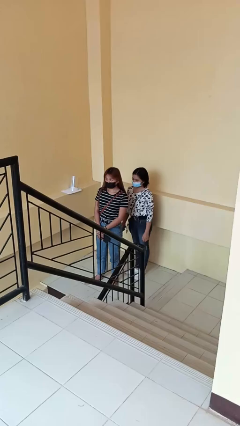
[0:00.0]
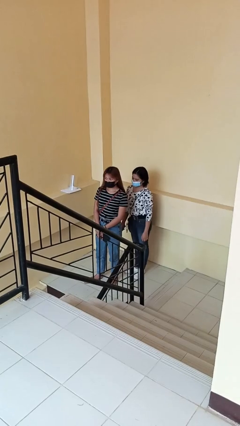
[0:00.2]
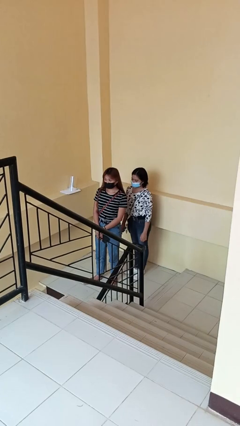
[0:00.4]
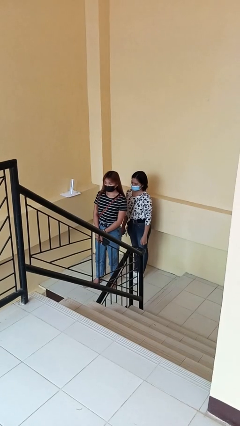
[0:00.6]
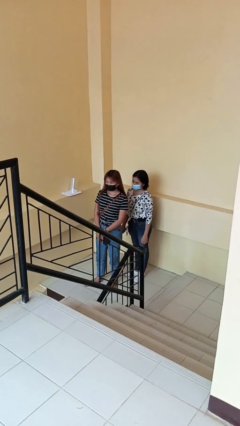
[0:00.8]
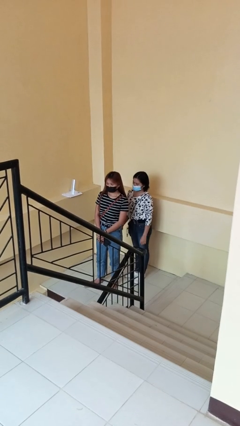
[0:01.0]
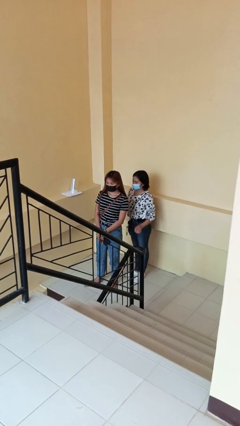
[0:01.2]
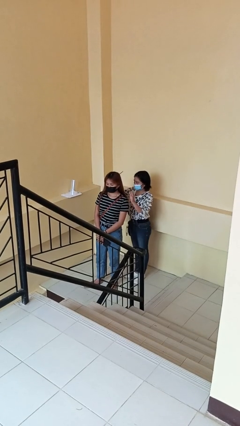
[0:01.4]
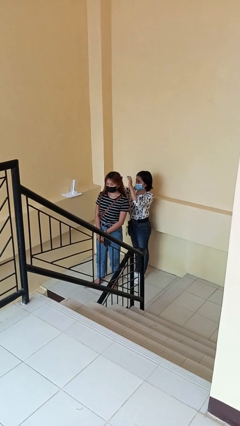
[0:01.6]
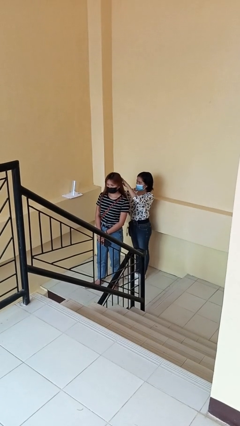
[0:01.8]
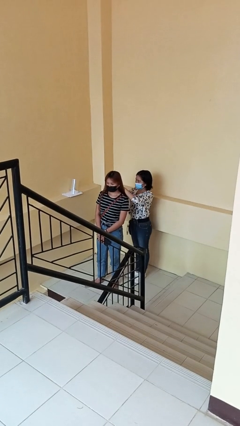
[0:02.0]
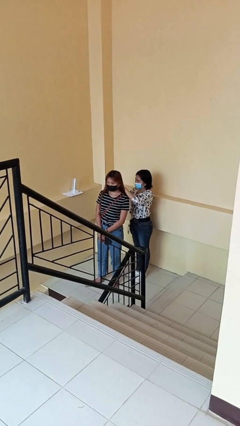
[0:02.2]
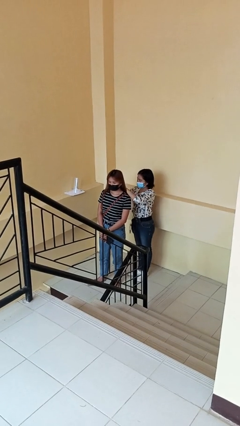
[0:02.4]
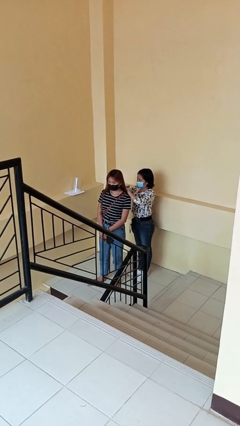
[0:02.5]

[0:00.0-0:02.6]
person brushes hair of person

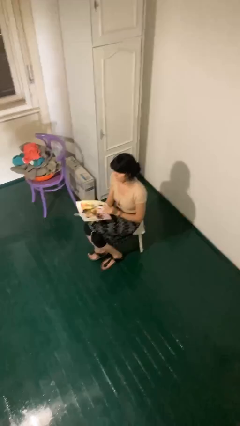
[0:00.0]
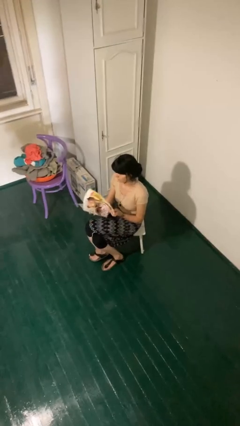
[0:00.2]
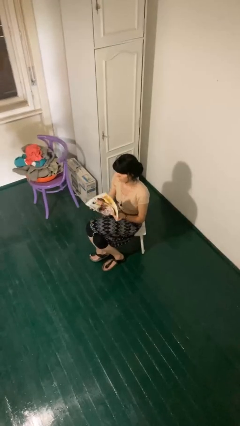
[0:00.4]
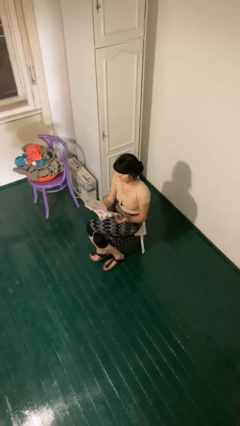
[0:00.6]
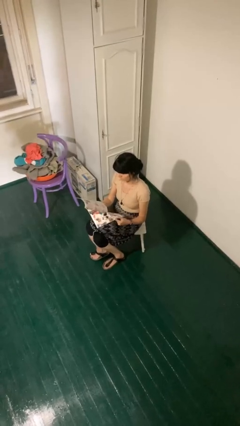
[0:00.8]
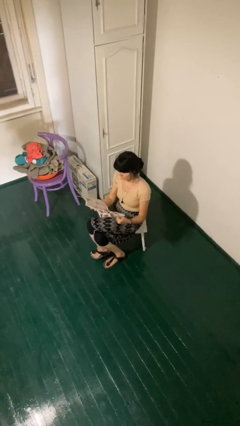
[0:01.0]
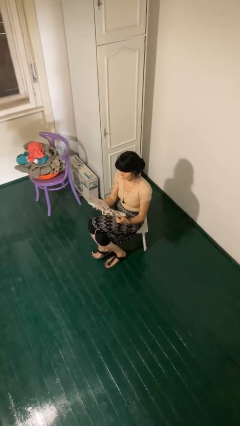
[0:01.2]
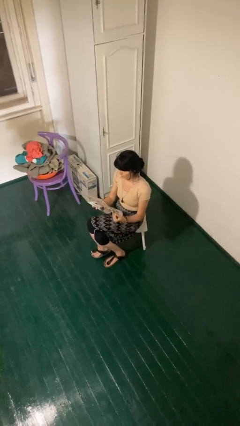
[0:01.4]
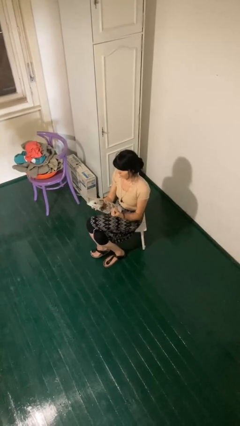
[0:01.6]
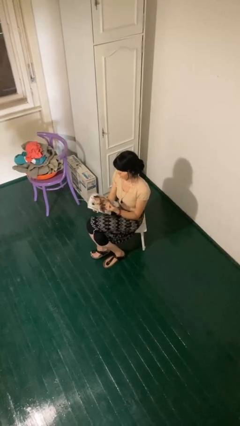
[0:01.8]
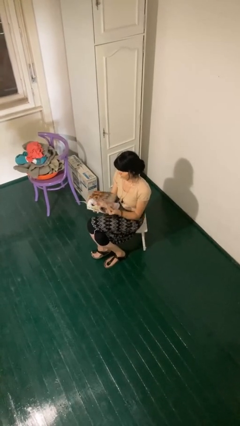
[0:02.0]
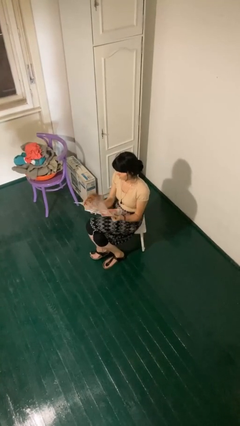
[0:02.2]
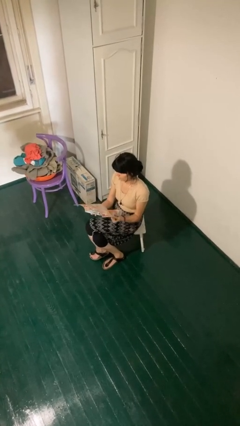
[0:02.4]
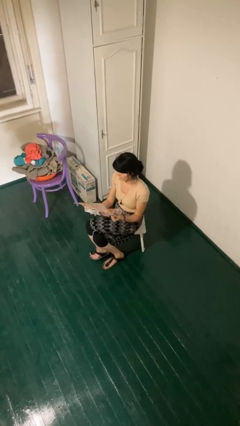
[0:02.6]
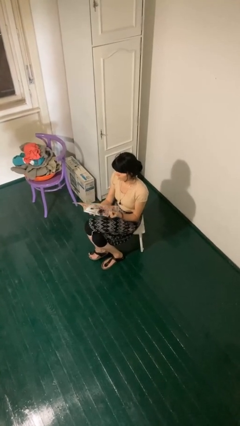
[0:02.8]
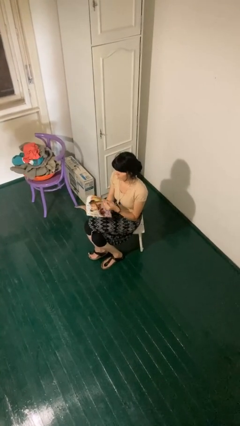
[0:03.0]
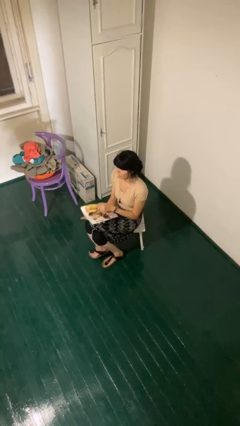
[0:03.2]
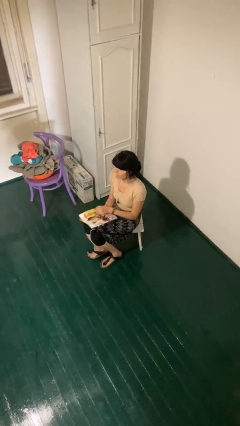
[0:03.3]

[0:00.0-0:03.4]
person reads magazine

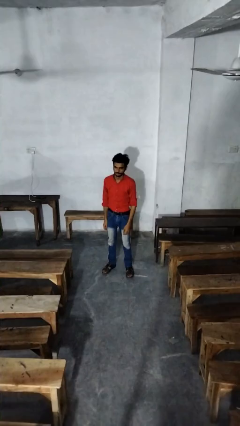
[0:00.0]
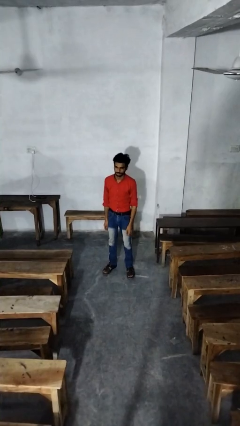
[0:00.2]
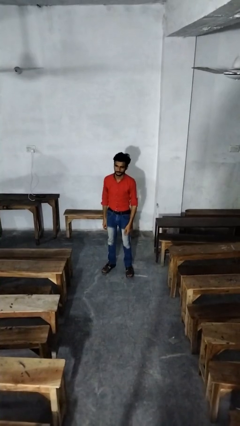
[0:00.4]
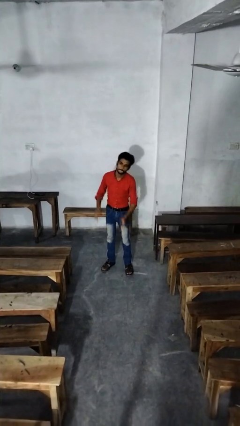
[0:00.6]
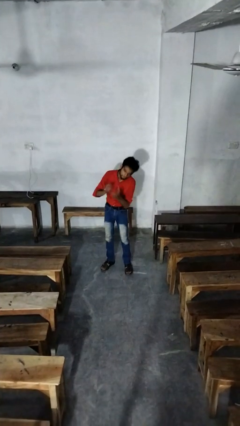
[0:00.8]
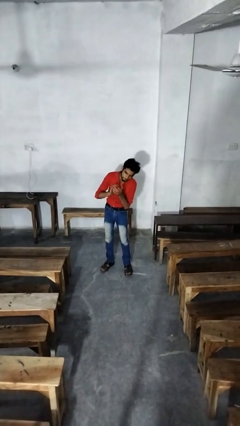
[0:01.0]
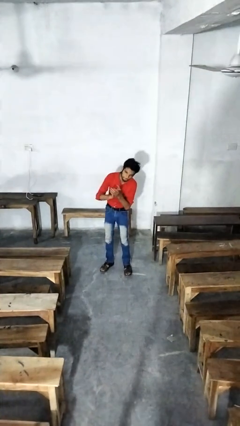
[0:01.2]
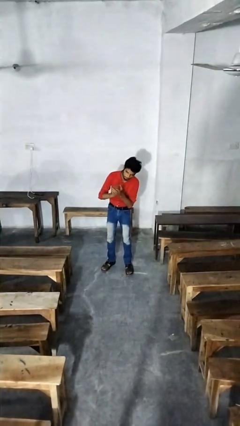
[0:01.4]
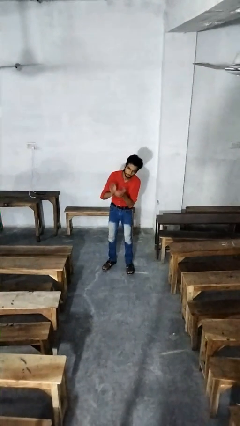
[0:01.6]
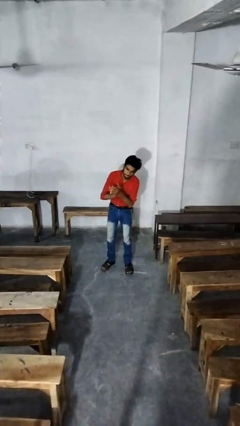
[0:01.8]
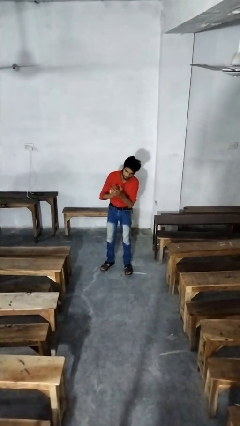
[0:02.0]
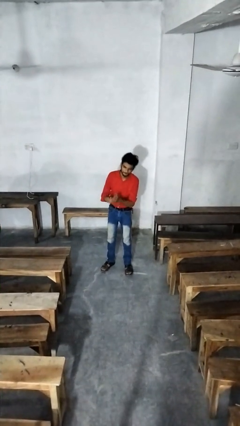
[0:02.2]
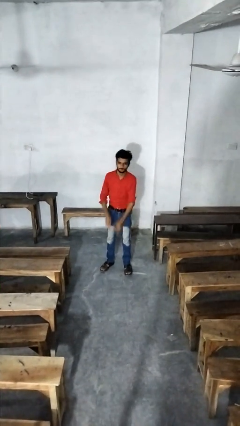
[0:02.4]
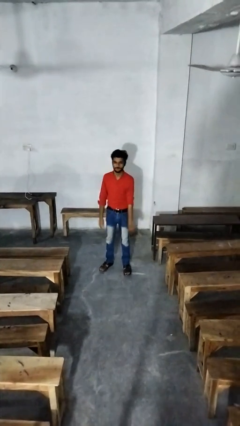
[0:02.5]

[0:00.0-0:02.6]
person claps hands

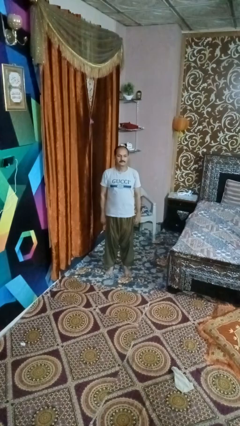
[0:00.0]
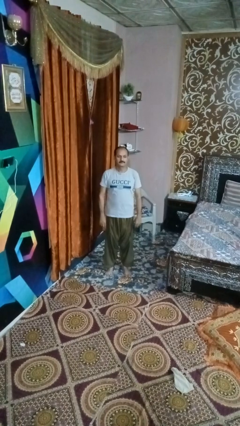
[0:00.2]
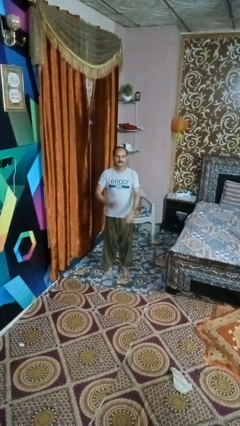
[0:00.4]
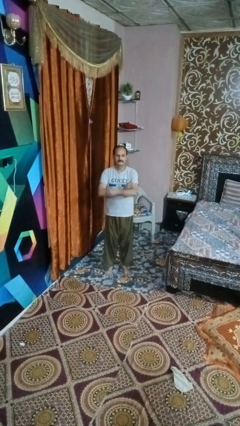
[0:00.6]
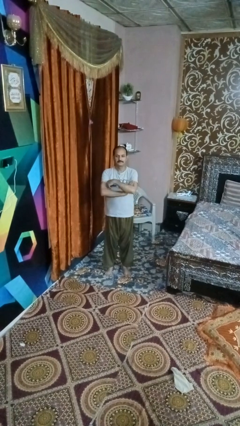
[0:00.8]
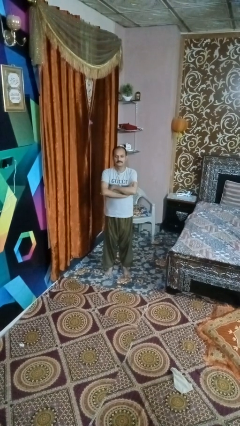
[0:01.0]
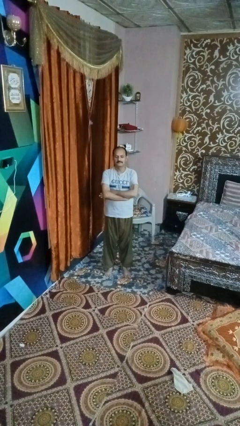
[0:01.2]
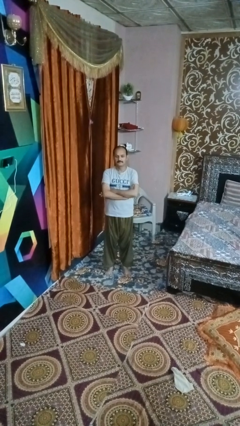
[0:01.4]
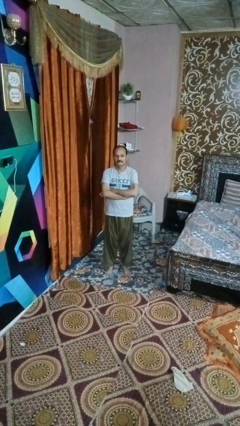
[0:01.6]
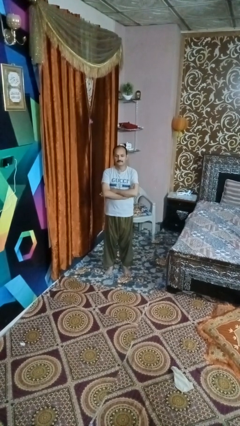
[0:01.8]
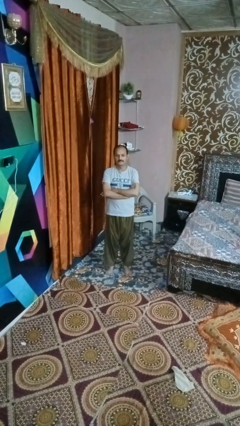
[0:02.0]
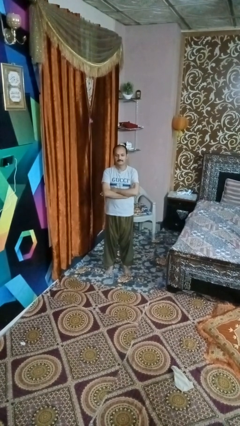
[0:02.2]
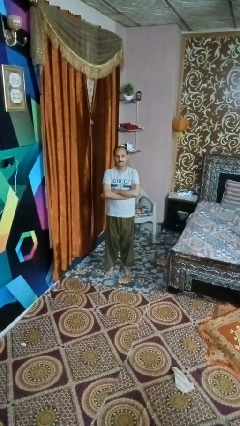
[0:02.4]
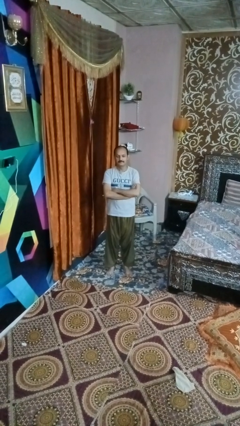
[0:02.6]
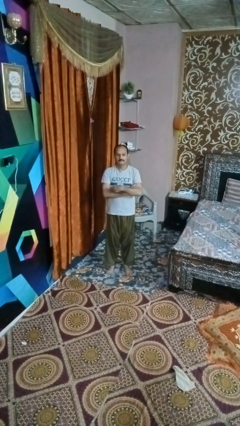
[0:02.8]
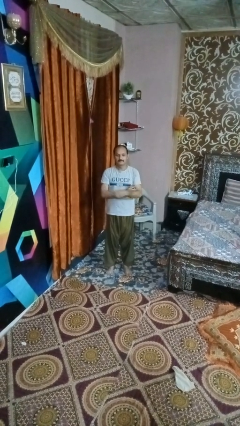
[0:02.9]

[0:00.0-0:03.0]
person crosses arms

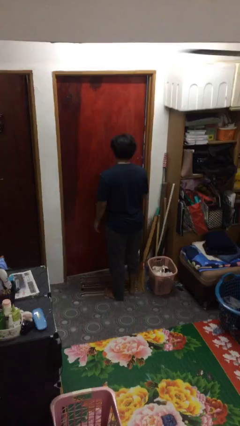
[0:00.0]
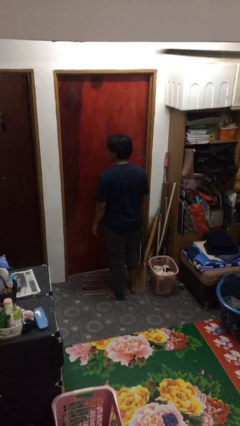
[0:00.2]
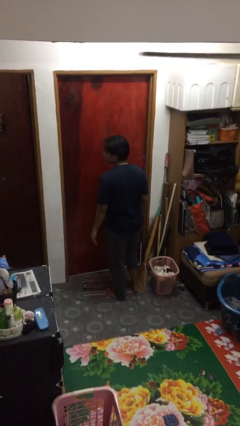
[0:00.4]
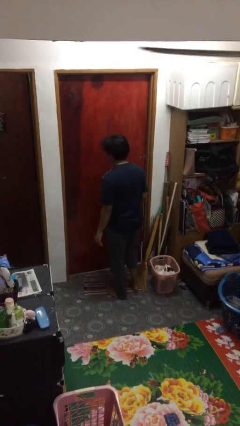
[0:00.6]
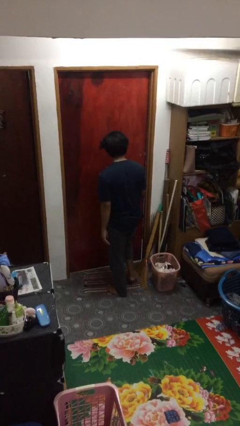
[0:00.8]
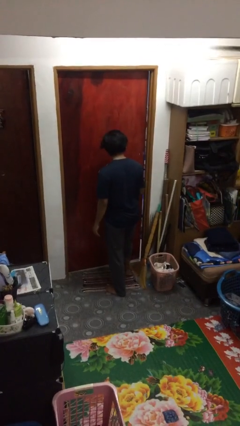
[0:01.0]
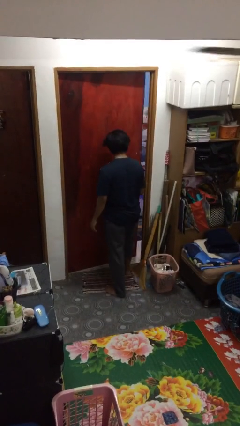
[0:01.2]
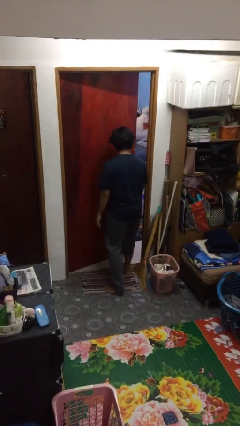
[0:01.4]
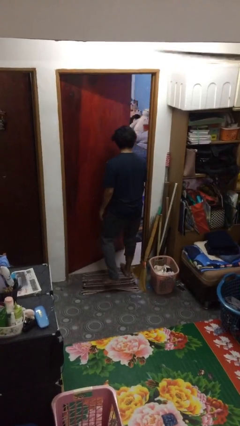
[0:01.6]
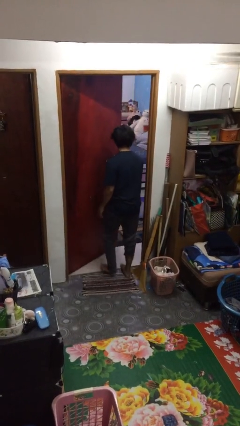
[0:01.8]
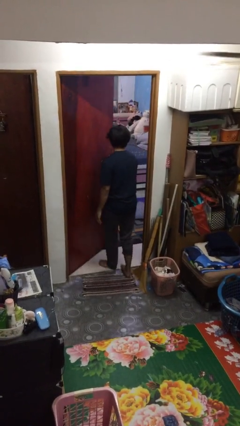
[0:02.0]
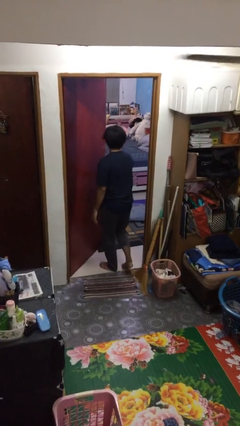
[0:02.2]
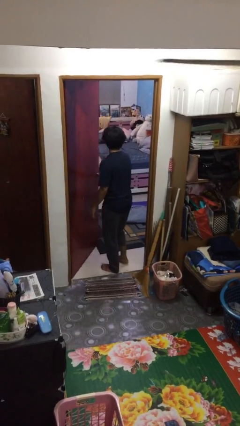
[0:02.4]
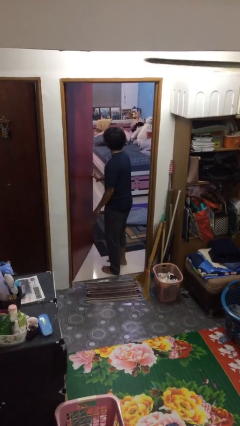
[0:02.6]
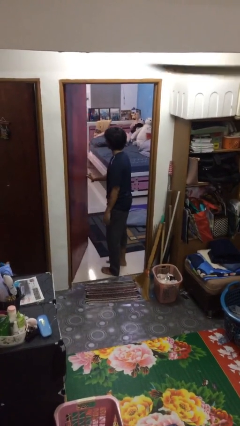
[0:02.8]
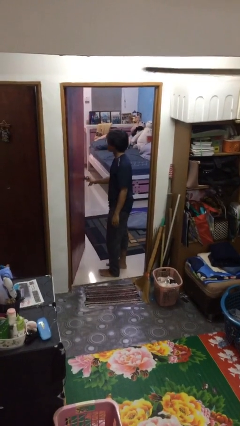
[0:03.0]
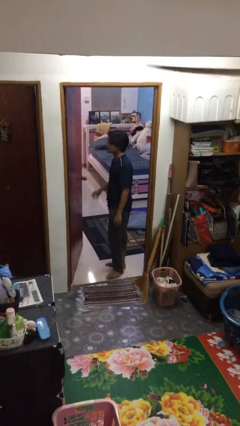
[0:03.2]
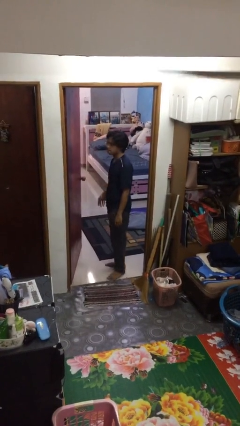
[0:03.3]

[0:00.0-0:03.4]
person opens facility door

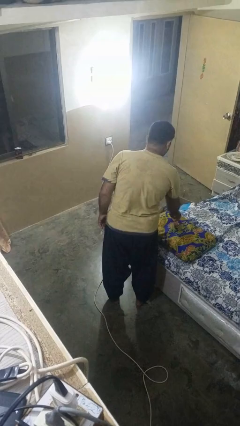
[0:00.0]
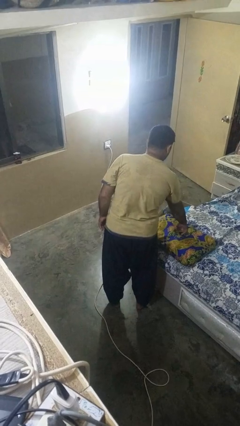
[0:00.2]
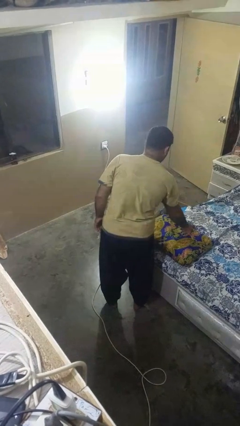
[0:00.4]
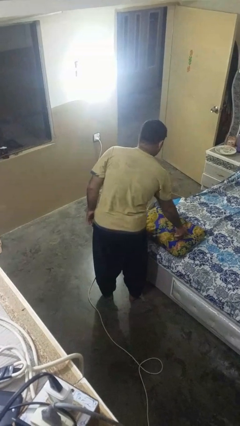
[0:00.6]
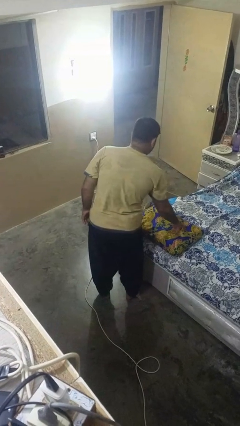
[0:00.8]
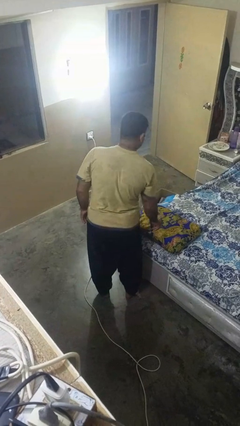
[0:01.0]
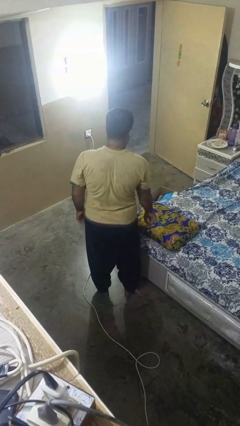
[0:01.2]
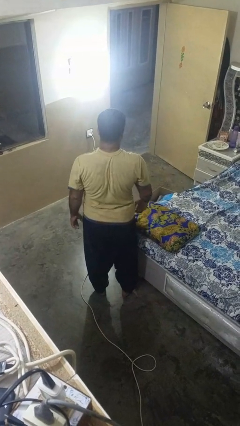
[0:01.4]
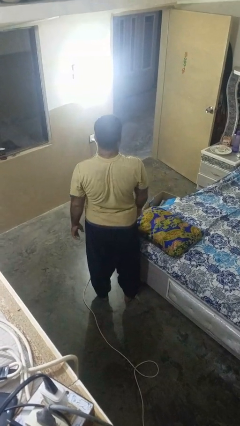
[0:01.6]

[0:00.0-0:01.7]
person taps object with finger

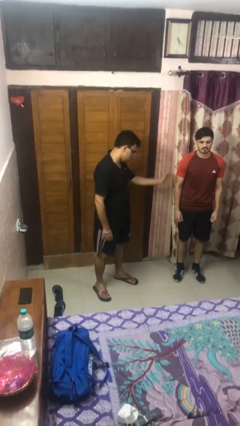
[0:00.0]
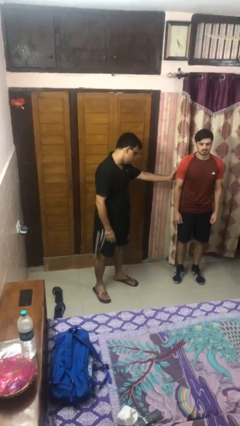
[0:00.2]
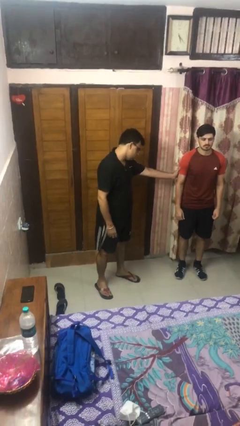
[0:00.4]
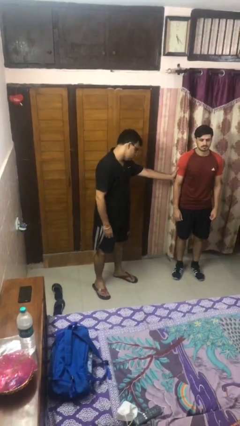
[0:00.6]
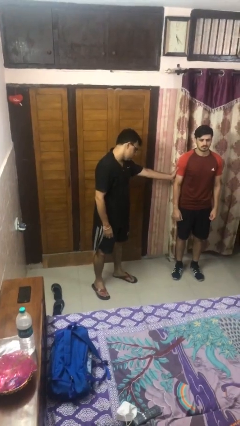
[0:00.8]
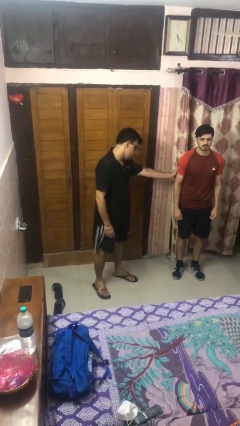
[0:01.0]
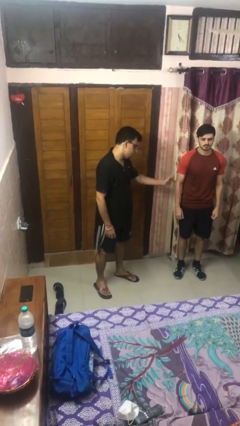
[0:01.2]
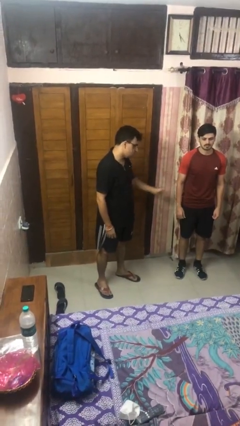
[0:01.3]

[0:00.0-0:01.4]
person grabs person by bicep
